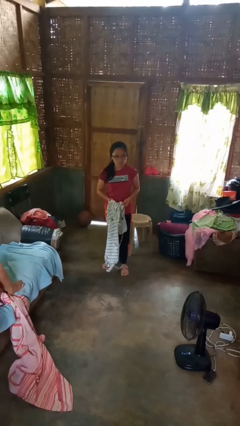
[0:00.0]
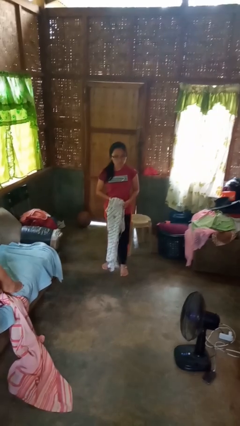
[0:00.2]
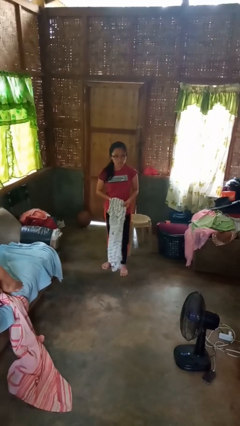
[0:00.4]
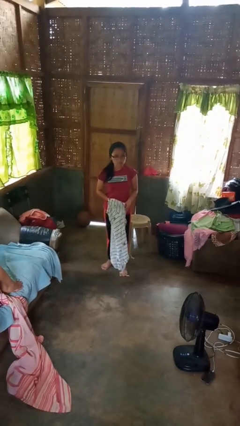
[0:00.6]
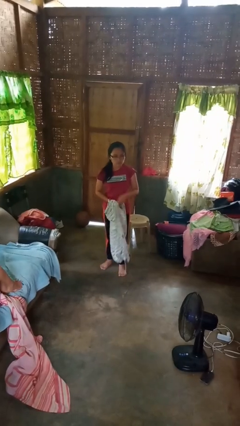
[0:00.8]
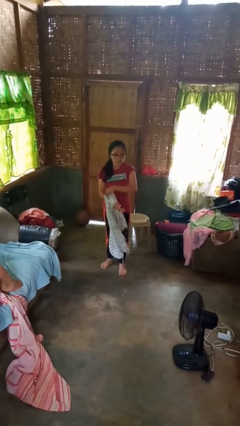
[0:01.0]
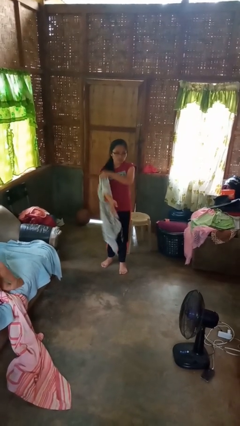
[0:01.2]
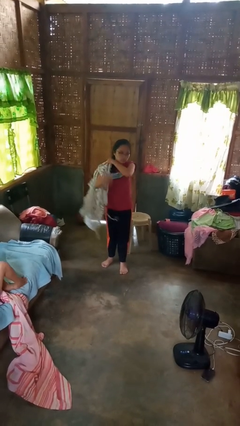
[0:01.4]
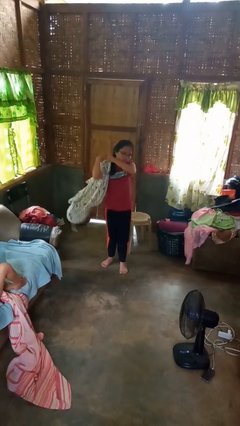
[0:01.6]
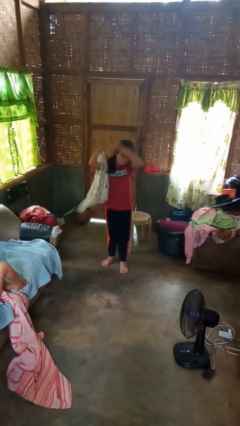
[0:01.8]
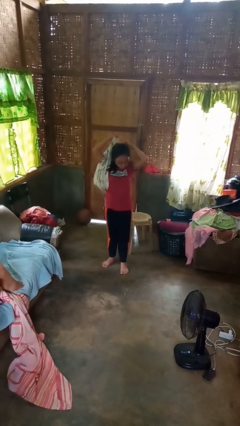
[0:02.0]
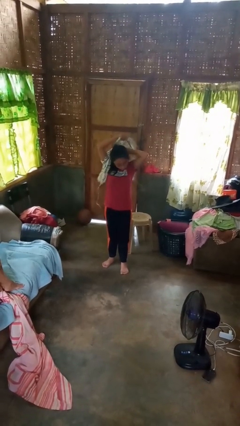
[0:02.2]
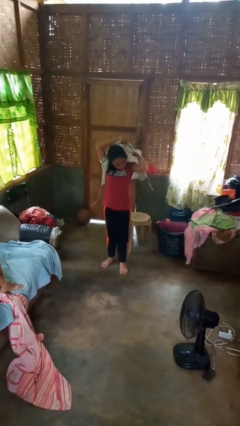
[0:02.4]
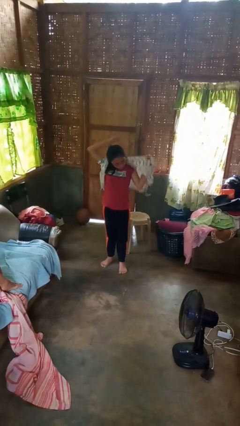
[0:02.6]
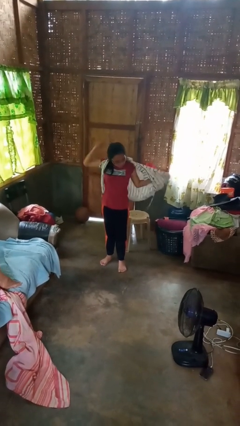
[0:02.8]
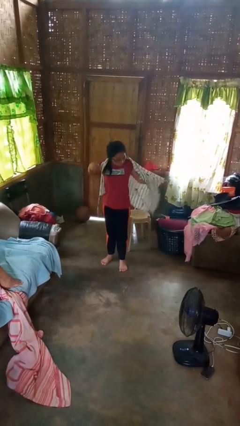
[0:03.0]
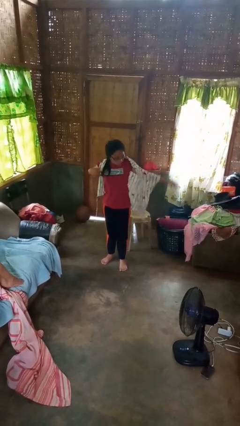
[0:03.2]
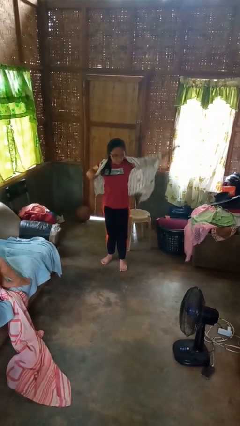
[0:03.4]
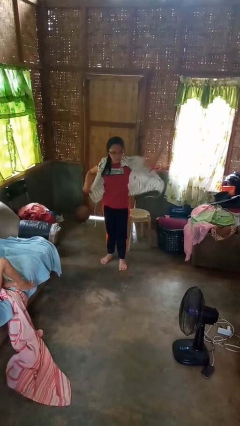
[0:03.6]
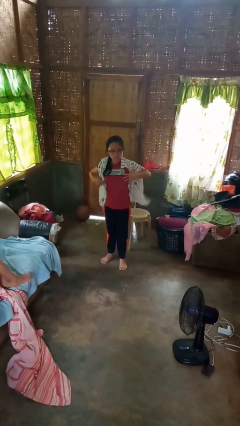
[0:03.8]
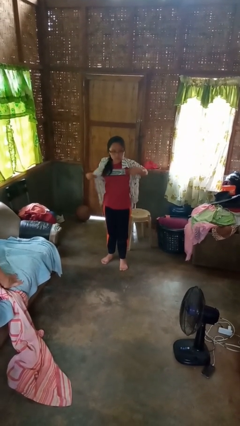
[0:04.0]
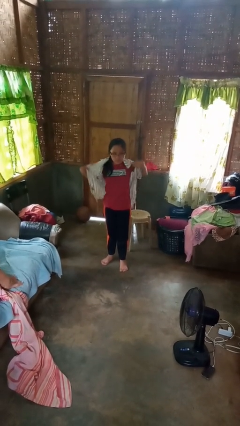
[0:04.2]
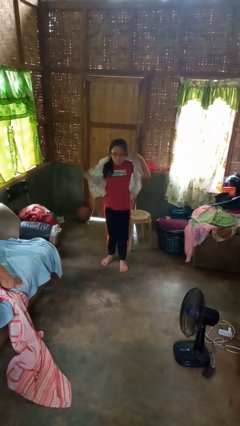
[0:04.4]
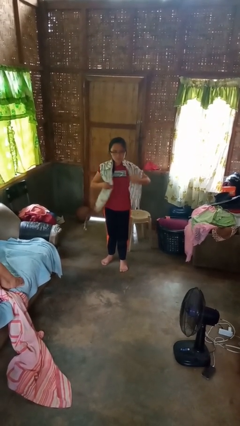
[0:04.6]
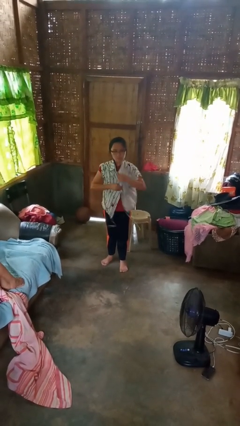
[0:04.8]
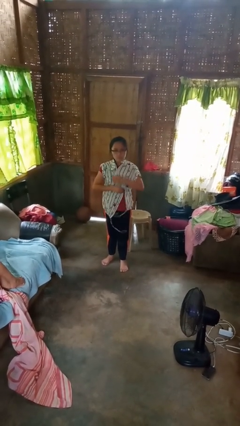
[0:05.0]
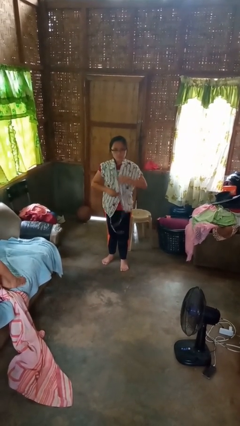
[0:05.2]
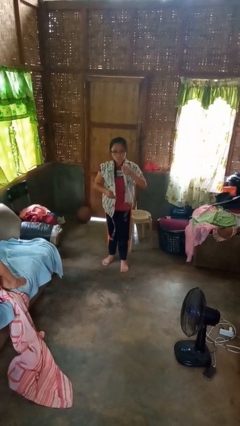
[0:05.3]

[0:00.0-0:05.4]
person puts on shirt

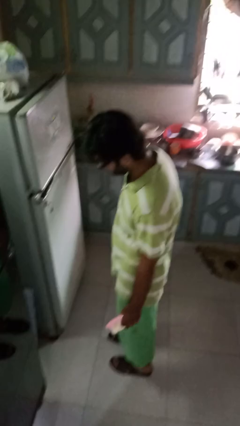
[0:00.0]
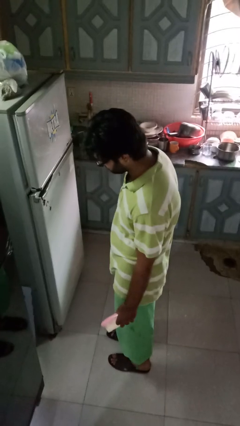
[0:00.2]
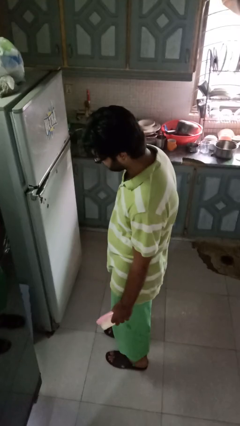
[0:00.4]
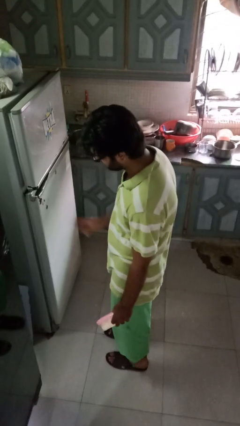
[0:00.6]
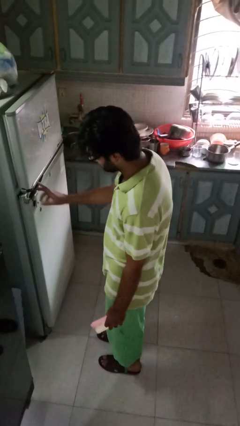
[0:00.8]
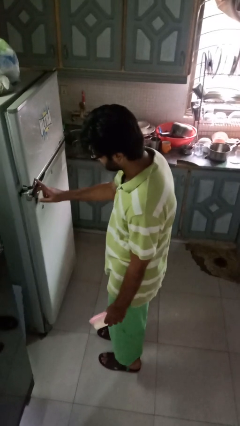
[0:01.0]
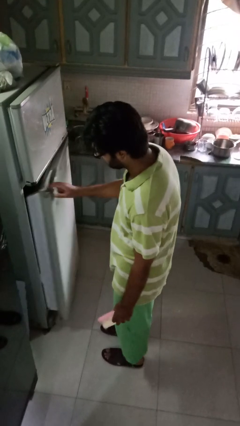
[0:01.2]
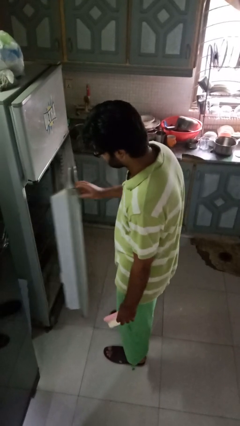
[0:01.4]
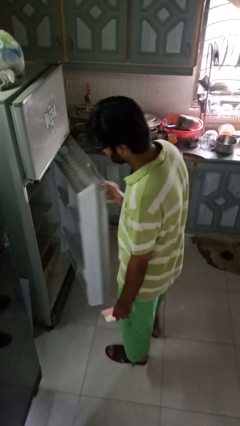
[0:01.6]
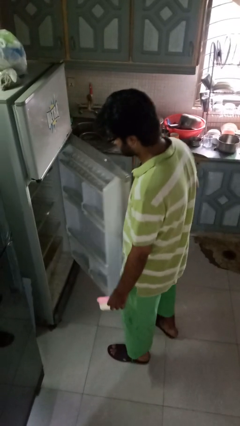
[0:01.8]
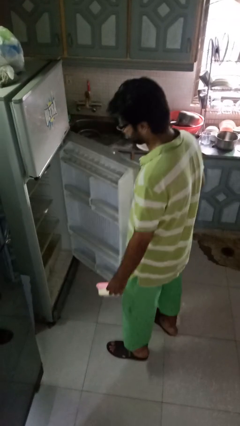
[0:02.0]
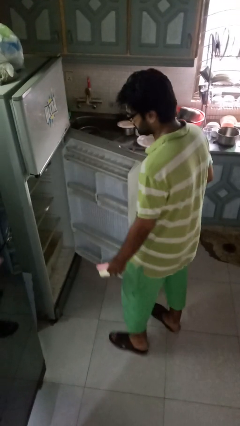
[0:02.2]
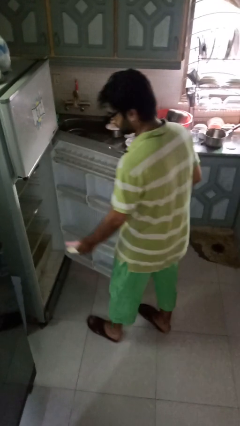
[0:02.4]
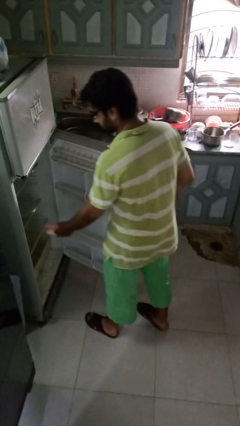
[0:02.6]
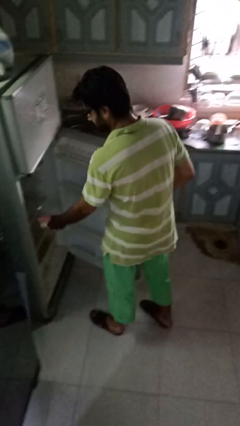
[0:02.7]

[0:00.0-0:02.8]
person opens refrigerator

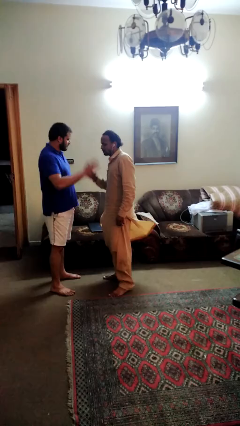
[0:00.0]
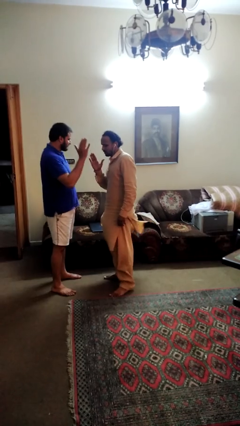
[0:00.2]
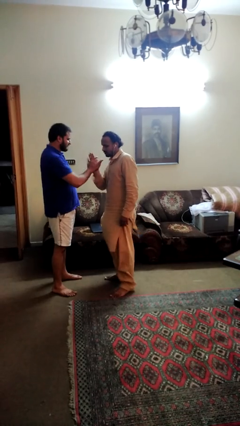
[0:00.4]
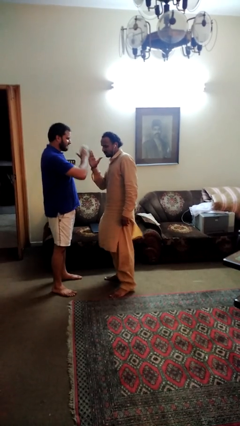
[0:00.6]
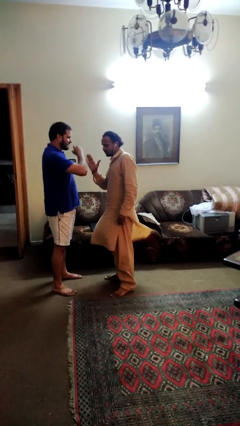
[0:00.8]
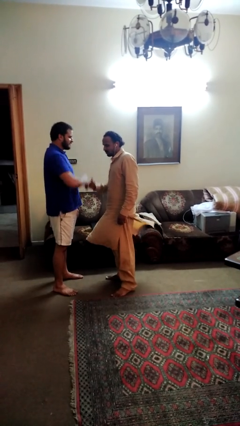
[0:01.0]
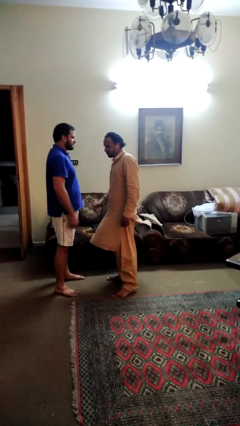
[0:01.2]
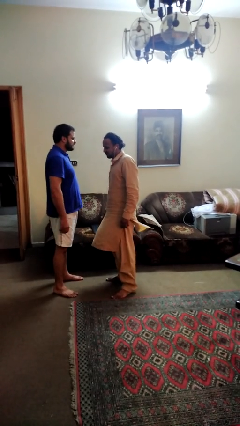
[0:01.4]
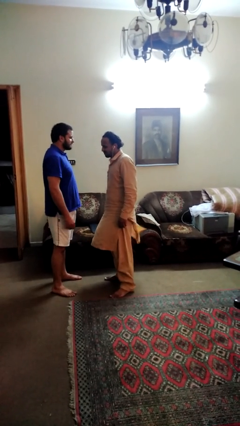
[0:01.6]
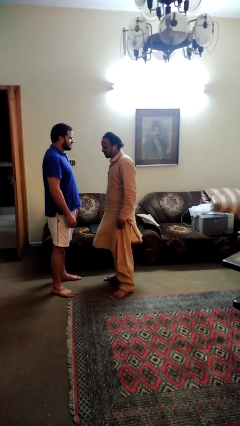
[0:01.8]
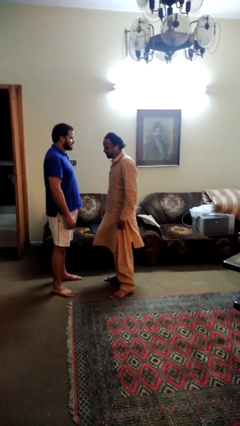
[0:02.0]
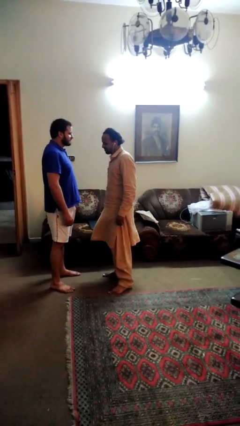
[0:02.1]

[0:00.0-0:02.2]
person highfives hand

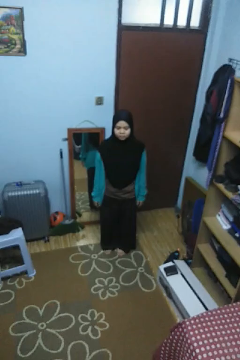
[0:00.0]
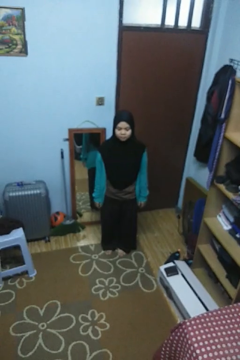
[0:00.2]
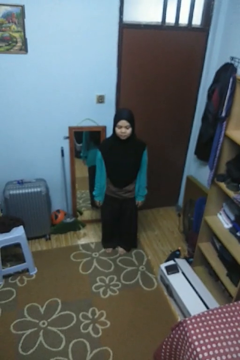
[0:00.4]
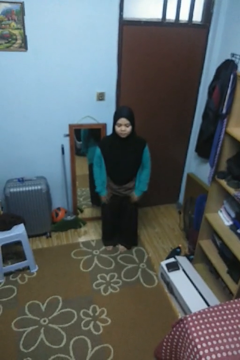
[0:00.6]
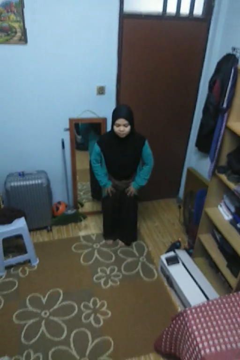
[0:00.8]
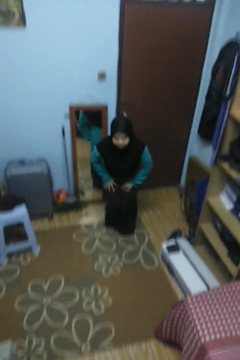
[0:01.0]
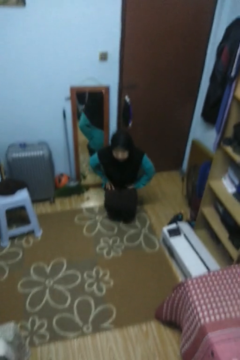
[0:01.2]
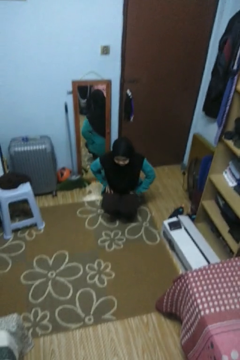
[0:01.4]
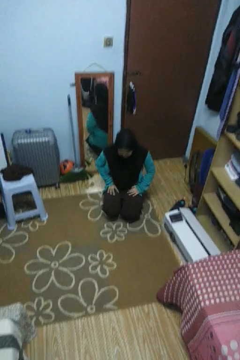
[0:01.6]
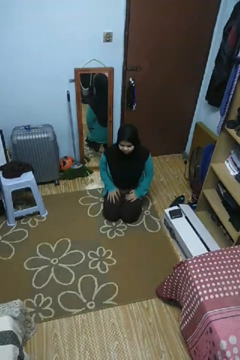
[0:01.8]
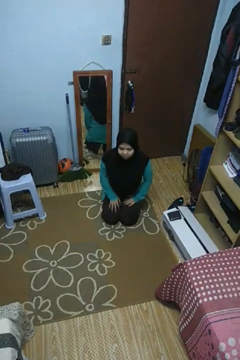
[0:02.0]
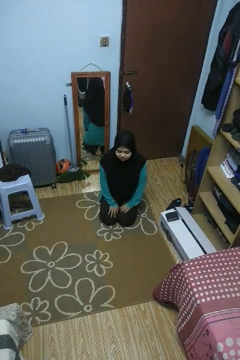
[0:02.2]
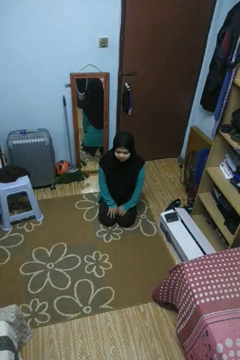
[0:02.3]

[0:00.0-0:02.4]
person kneels

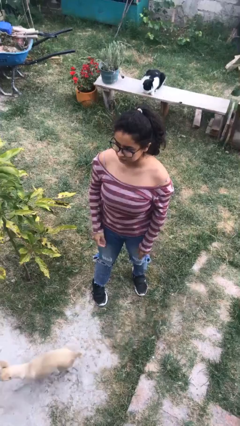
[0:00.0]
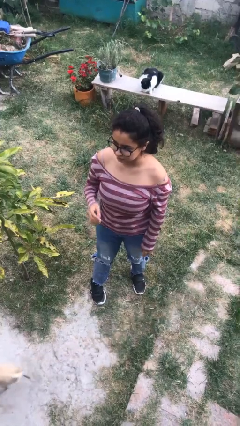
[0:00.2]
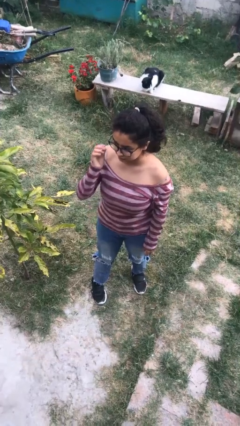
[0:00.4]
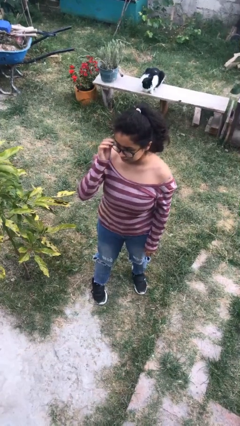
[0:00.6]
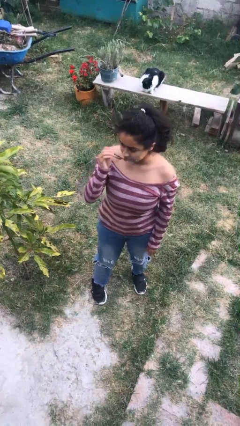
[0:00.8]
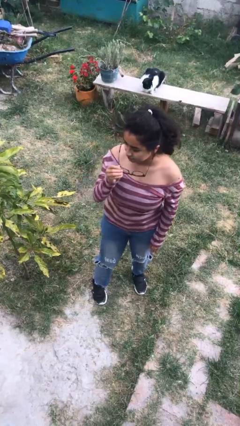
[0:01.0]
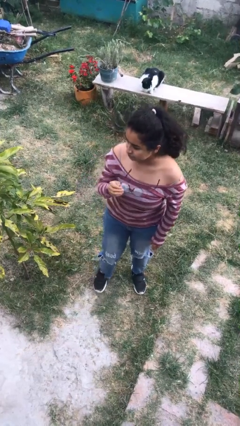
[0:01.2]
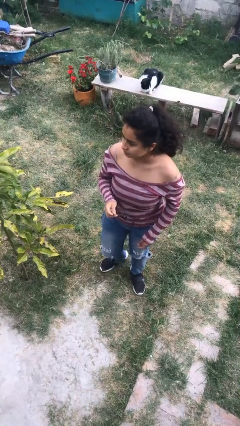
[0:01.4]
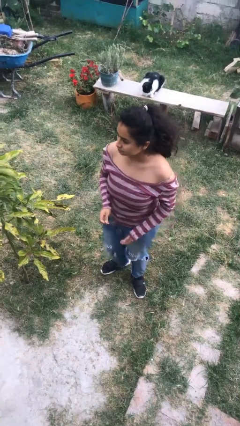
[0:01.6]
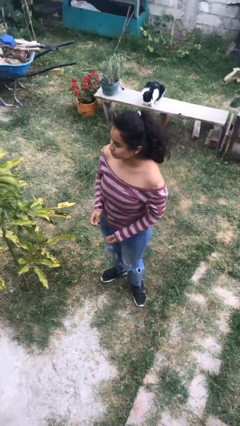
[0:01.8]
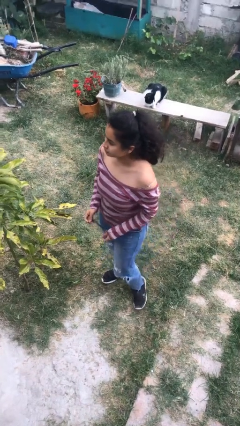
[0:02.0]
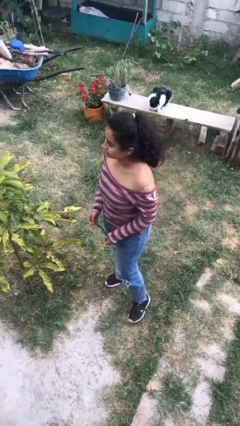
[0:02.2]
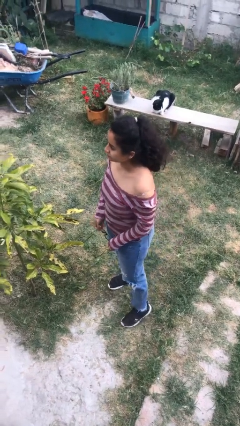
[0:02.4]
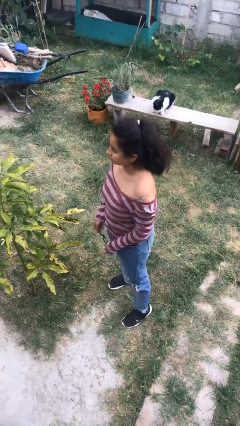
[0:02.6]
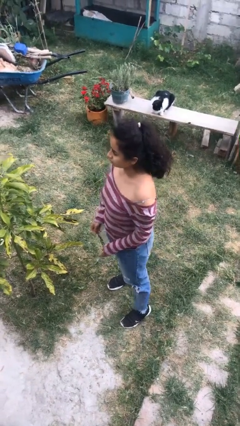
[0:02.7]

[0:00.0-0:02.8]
person takes off glasses

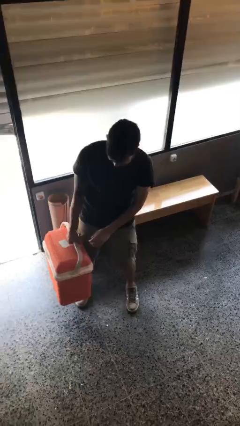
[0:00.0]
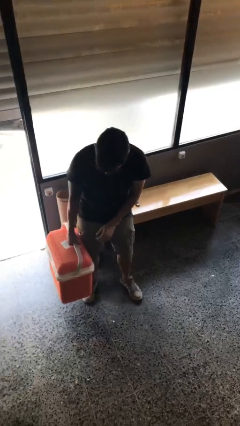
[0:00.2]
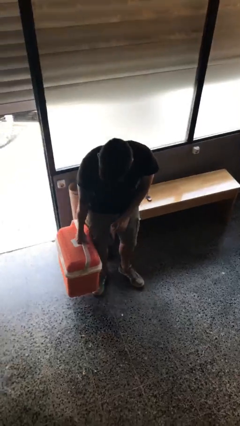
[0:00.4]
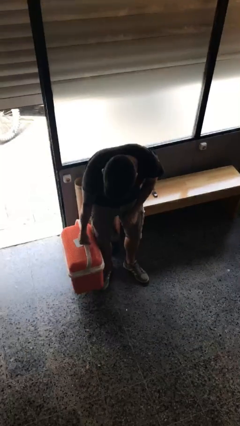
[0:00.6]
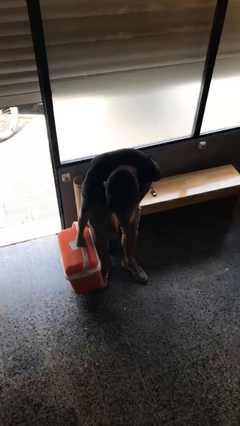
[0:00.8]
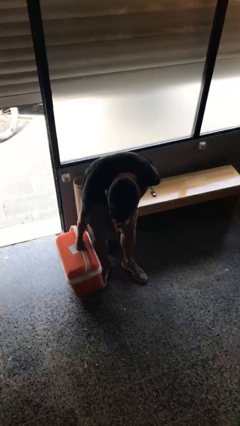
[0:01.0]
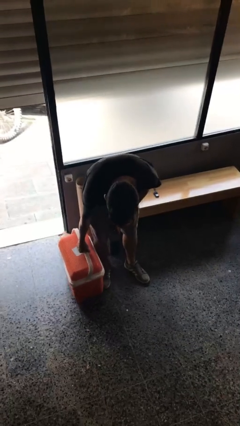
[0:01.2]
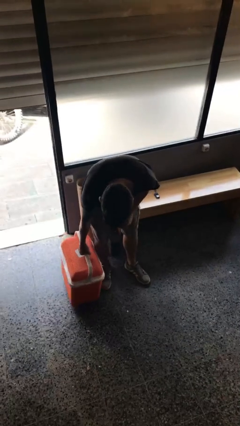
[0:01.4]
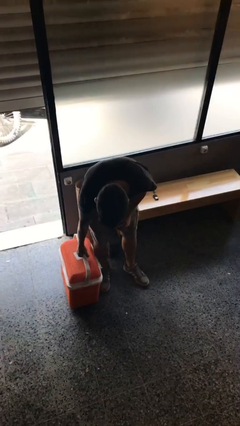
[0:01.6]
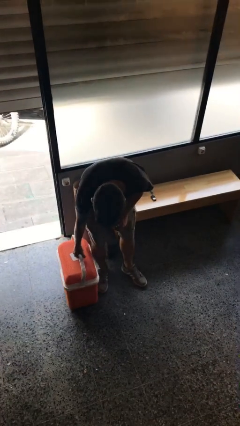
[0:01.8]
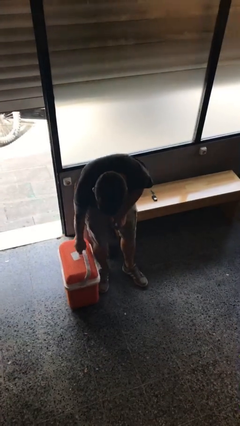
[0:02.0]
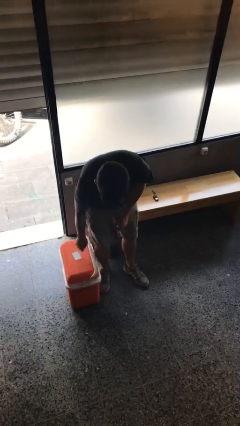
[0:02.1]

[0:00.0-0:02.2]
person puts down object on floor

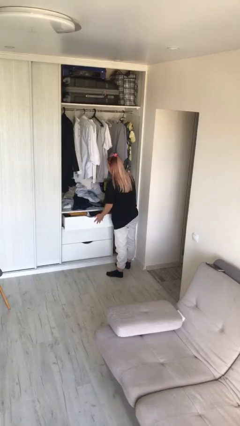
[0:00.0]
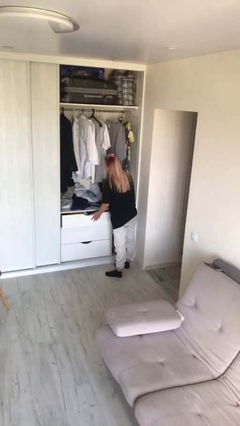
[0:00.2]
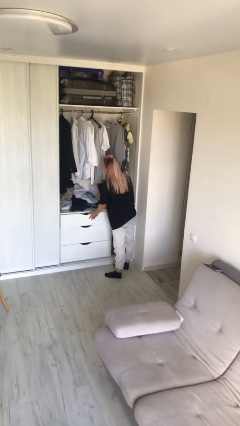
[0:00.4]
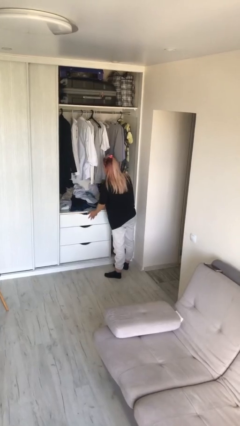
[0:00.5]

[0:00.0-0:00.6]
person closes dresser drawer
